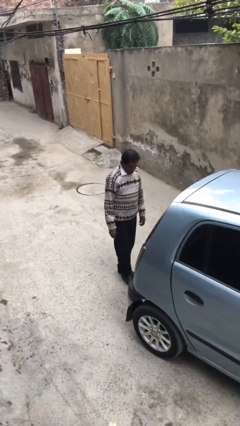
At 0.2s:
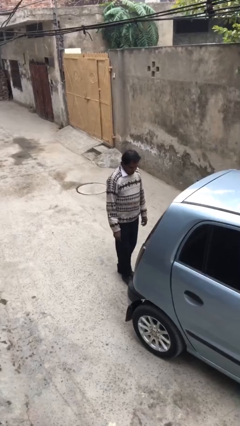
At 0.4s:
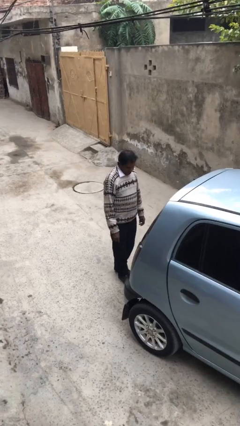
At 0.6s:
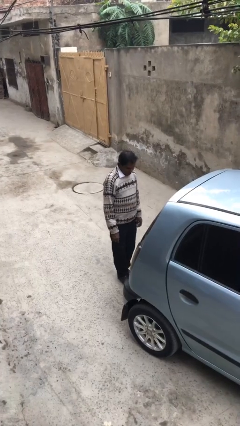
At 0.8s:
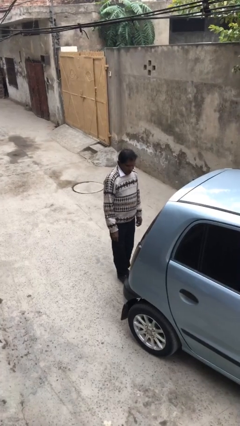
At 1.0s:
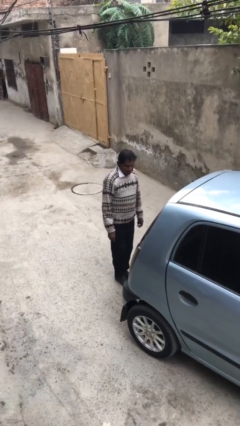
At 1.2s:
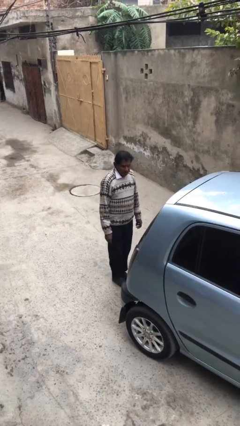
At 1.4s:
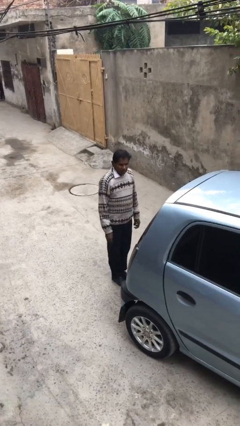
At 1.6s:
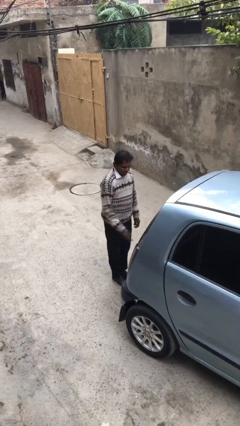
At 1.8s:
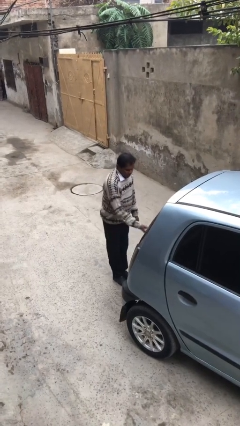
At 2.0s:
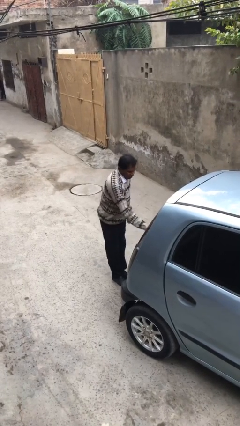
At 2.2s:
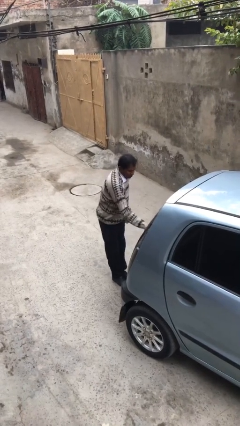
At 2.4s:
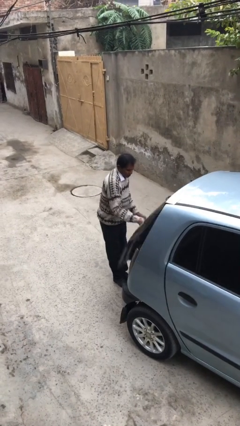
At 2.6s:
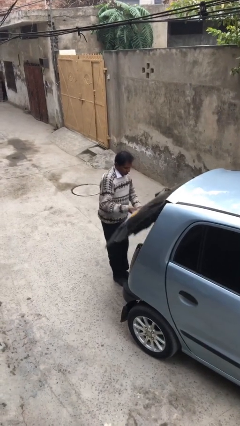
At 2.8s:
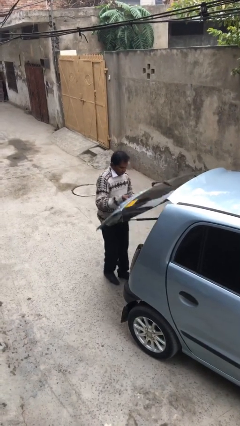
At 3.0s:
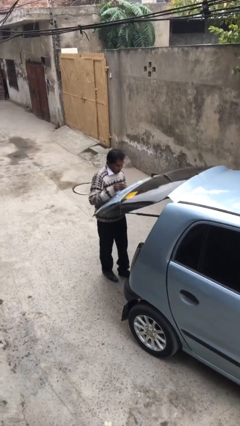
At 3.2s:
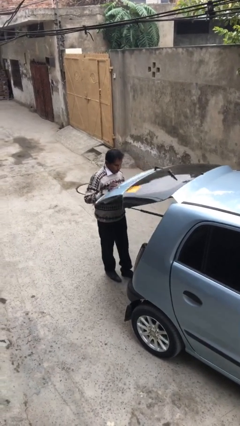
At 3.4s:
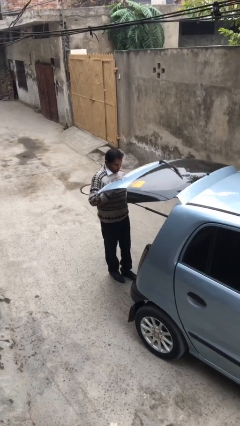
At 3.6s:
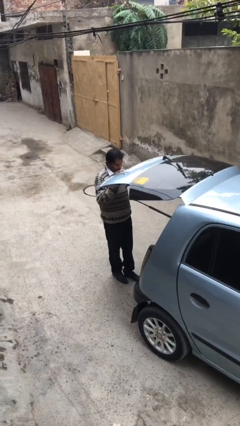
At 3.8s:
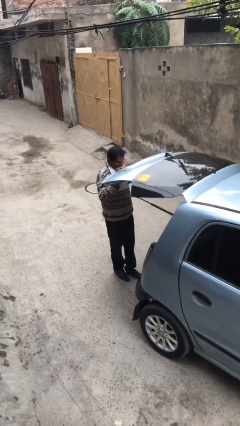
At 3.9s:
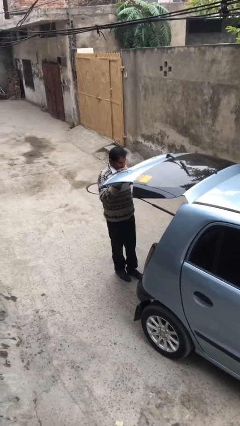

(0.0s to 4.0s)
person opens car trunk

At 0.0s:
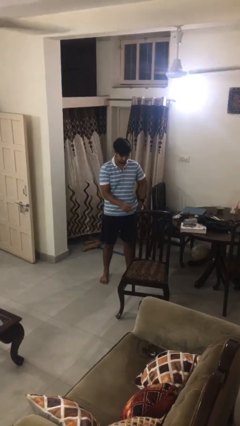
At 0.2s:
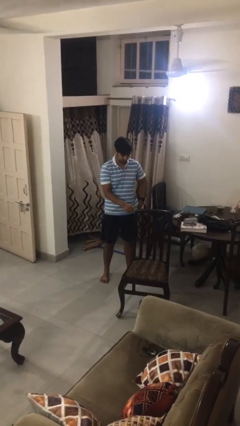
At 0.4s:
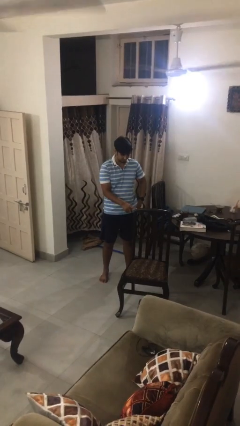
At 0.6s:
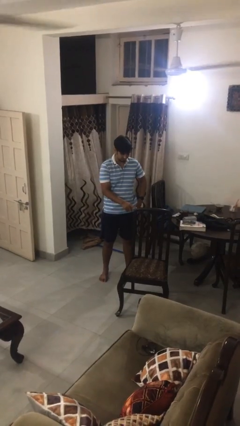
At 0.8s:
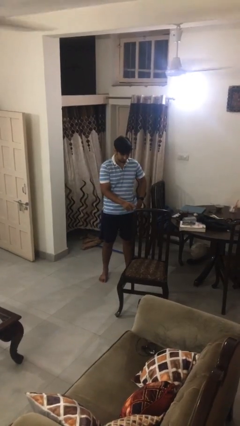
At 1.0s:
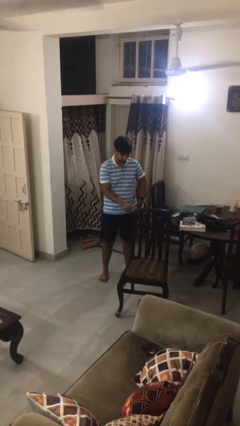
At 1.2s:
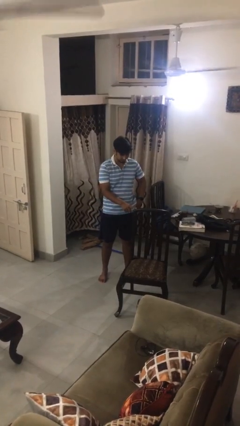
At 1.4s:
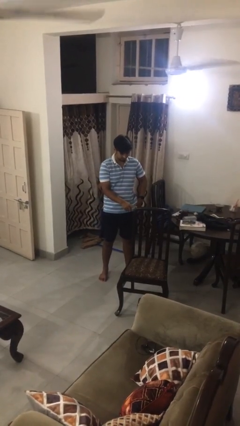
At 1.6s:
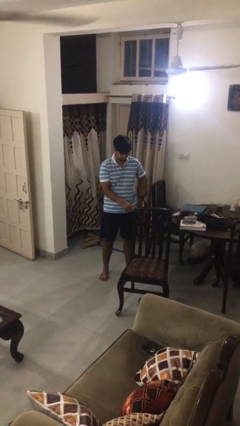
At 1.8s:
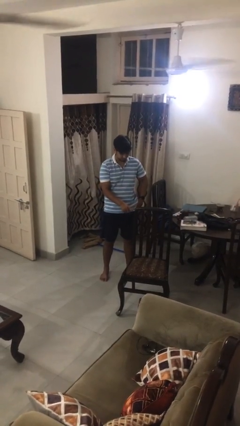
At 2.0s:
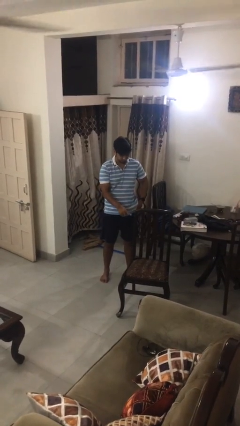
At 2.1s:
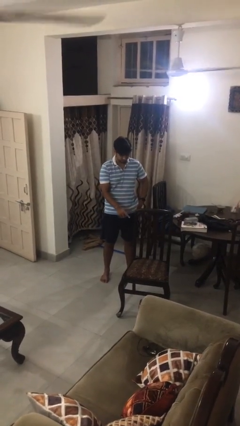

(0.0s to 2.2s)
person taps object with finger

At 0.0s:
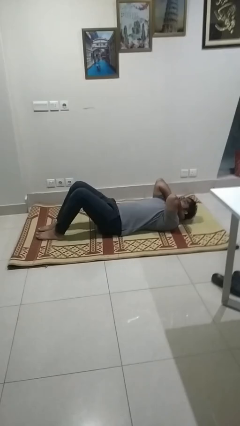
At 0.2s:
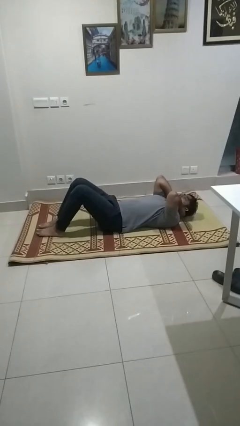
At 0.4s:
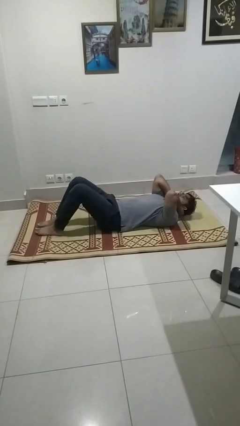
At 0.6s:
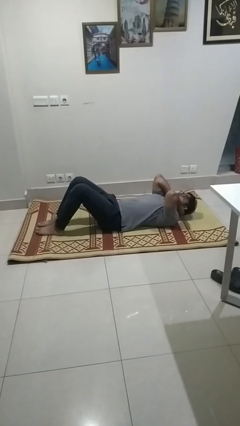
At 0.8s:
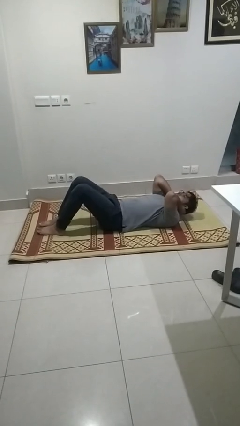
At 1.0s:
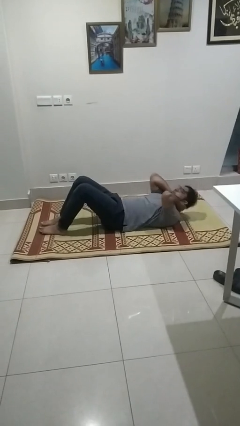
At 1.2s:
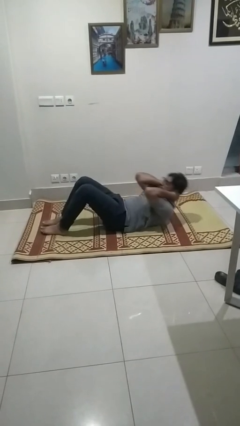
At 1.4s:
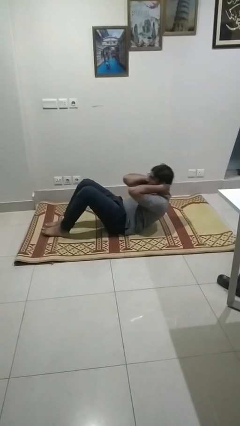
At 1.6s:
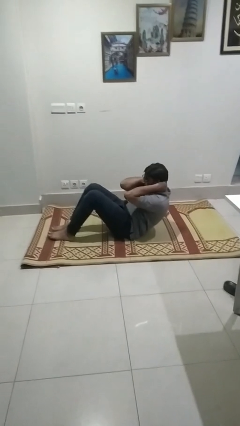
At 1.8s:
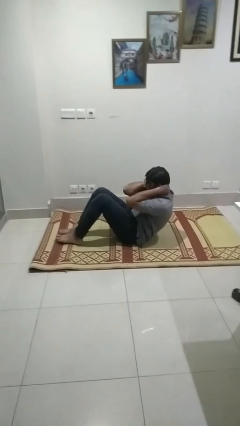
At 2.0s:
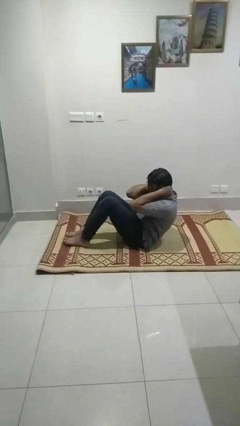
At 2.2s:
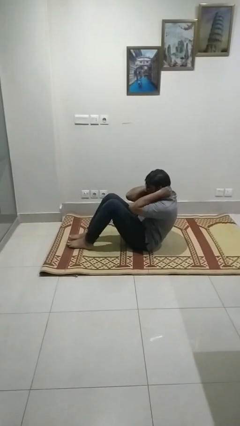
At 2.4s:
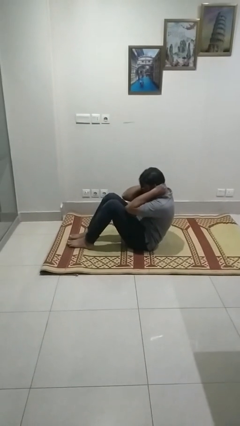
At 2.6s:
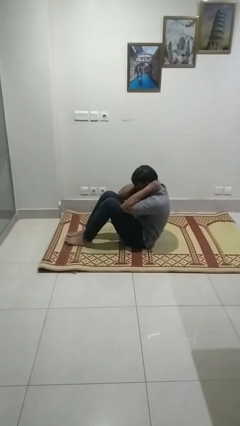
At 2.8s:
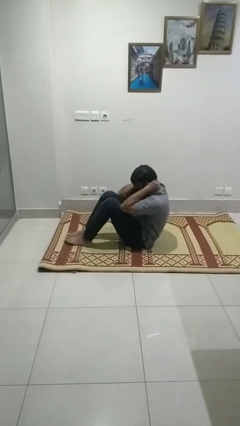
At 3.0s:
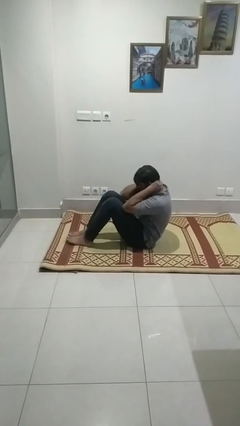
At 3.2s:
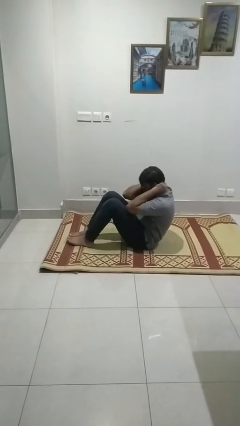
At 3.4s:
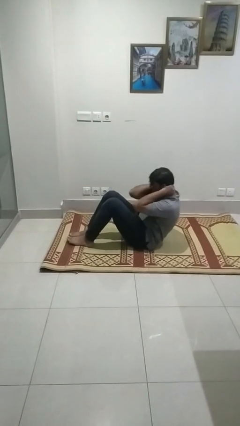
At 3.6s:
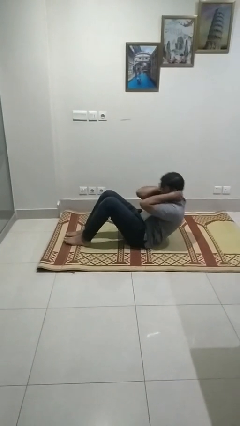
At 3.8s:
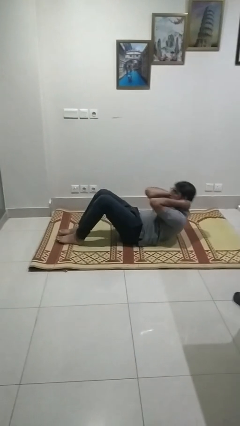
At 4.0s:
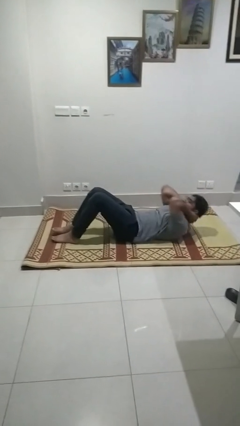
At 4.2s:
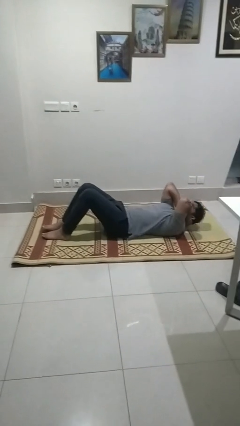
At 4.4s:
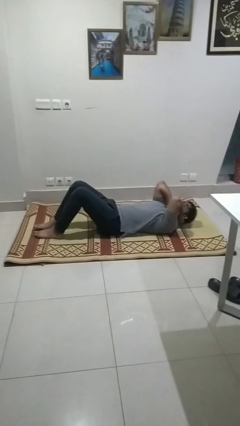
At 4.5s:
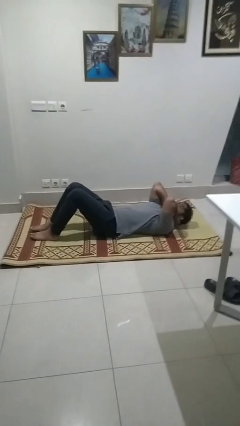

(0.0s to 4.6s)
person exercises with situp

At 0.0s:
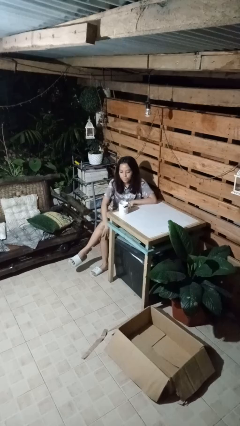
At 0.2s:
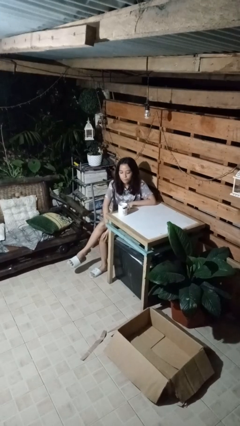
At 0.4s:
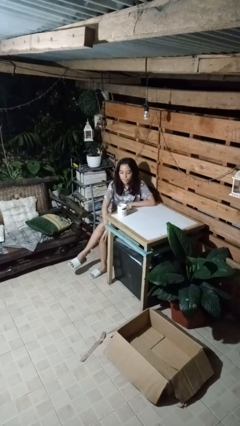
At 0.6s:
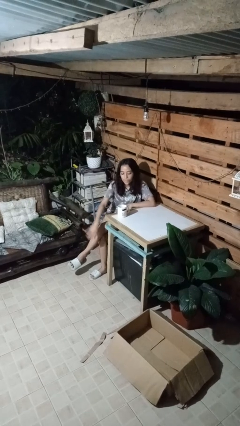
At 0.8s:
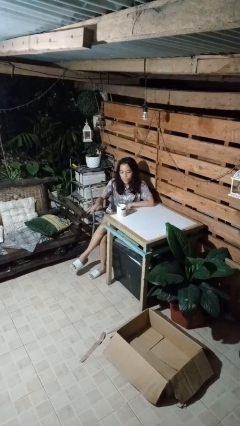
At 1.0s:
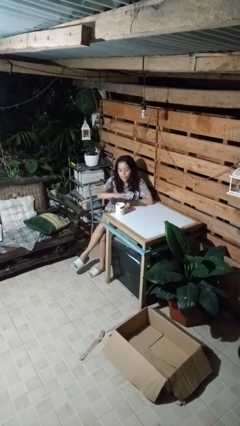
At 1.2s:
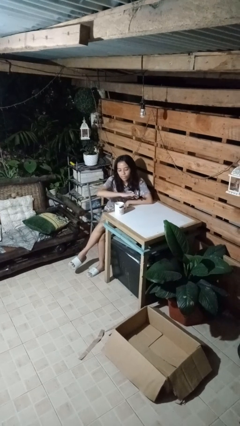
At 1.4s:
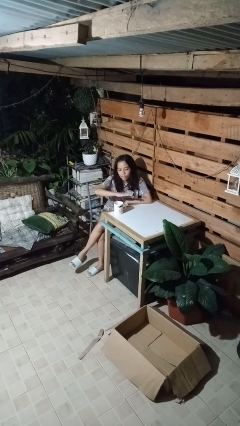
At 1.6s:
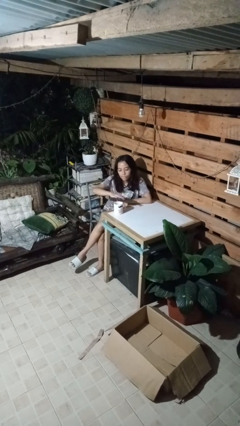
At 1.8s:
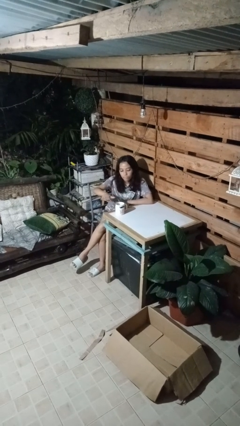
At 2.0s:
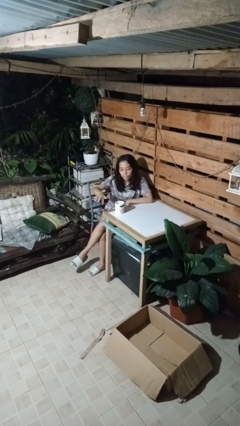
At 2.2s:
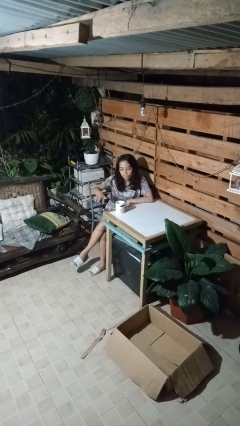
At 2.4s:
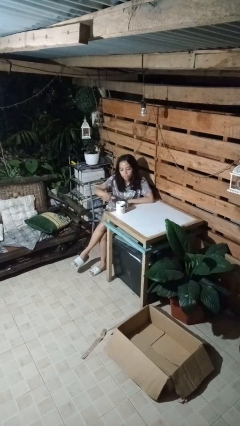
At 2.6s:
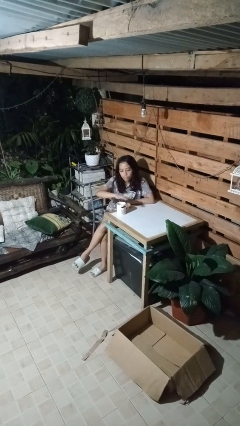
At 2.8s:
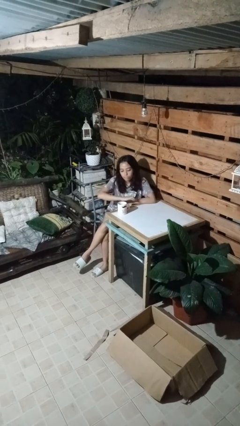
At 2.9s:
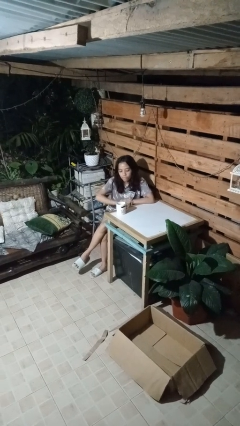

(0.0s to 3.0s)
person waves hand over object

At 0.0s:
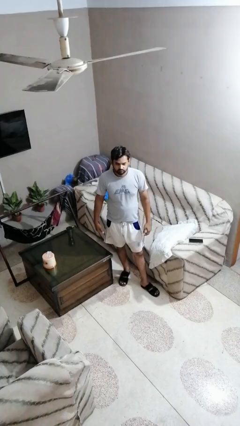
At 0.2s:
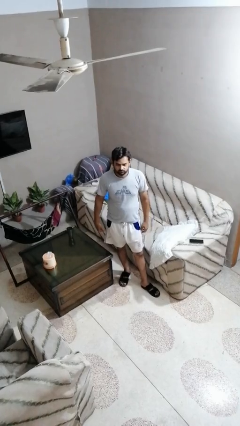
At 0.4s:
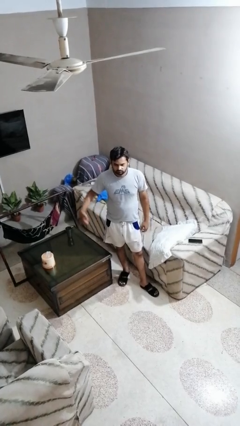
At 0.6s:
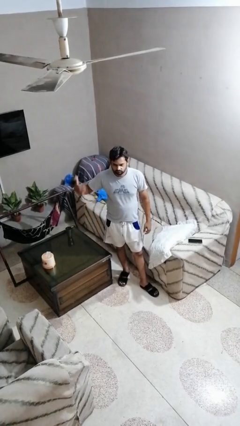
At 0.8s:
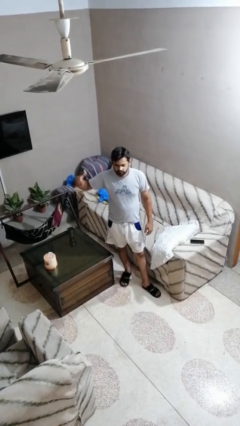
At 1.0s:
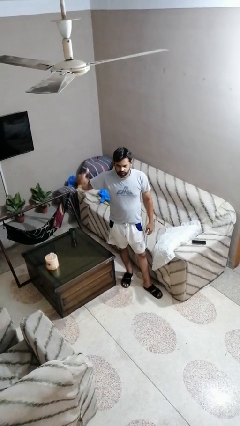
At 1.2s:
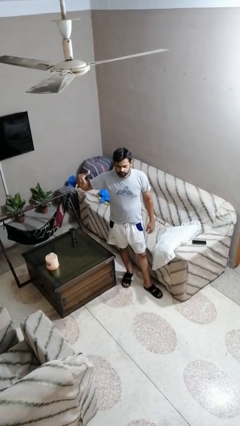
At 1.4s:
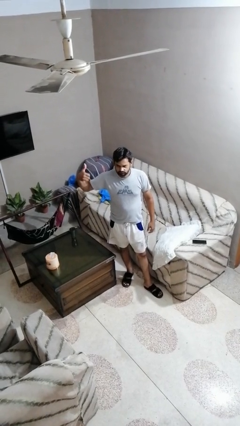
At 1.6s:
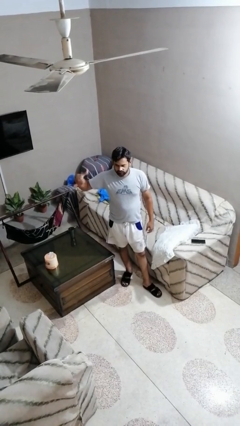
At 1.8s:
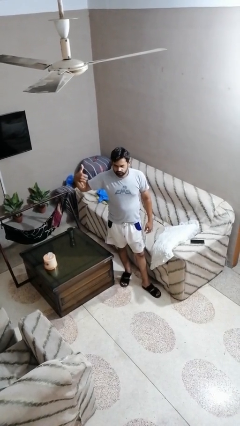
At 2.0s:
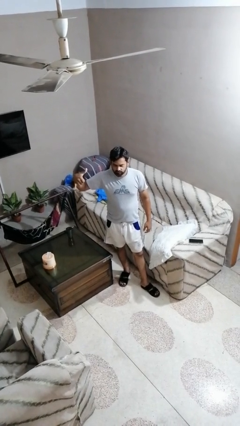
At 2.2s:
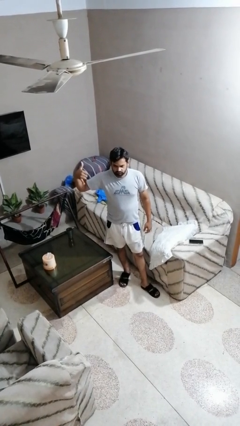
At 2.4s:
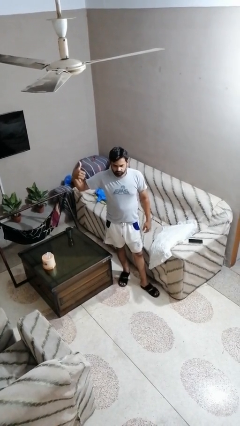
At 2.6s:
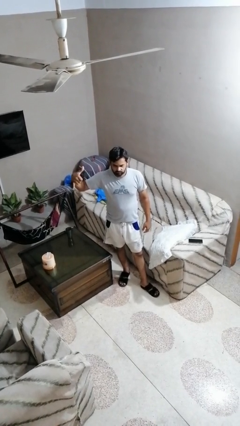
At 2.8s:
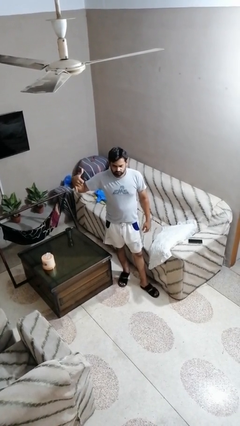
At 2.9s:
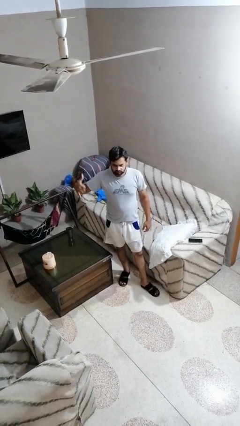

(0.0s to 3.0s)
person gestures hang loose

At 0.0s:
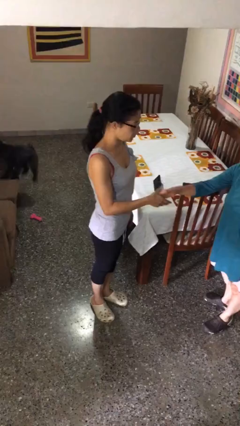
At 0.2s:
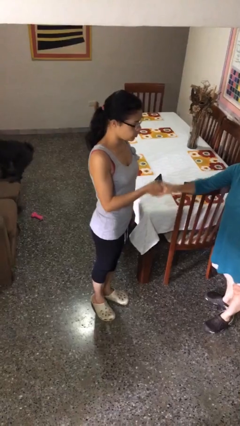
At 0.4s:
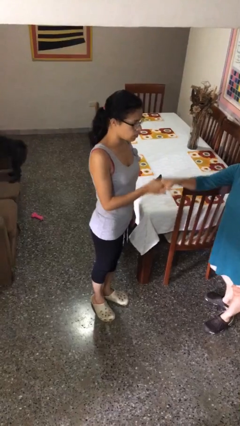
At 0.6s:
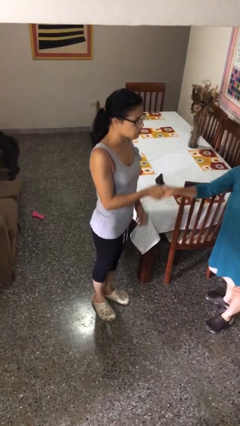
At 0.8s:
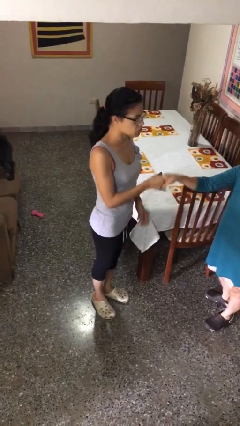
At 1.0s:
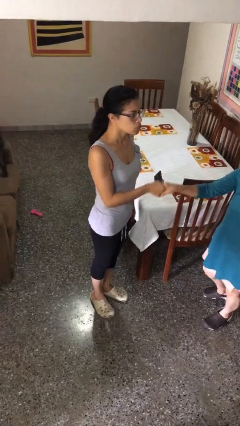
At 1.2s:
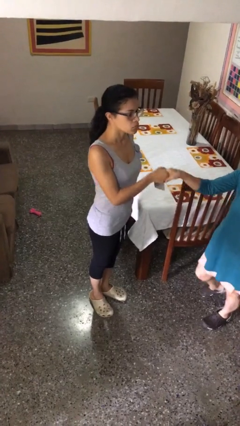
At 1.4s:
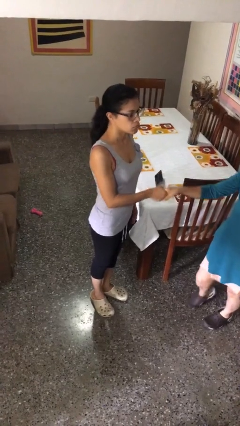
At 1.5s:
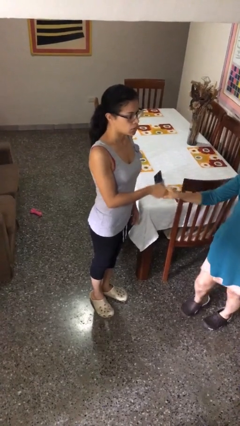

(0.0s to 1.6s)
person shakes hand
